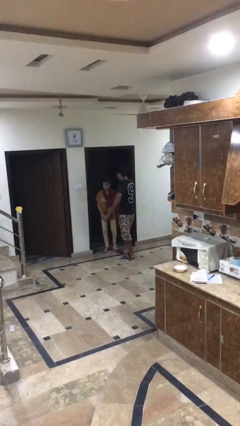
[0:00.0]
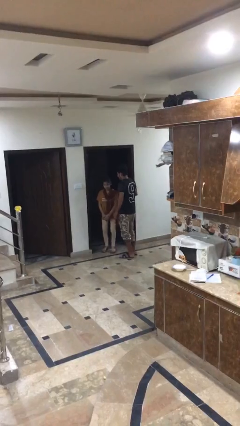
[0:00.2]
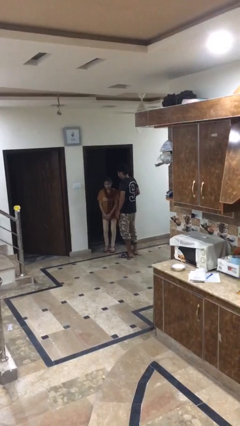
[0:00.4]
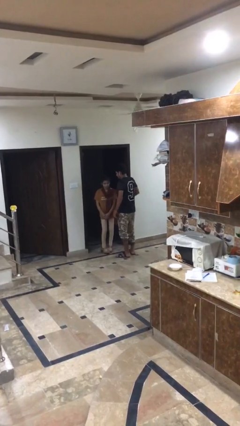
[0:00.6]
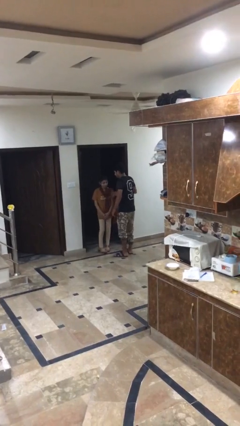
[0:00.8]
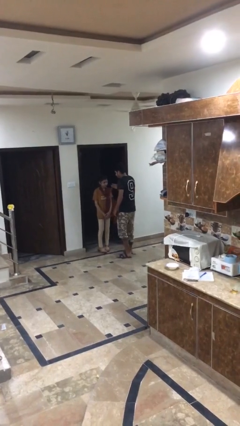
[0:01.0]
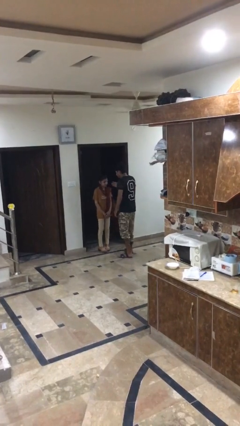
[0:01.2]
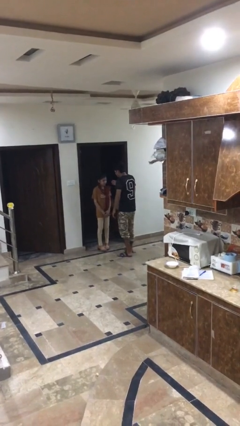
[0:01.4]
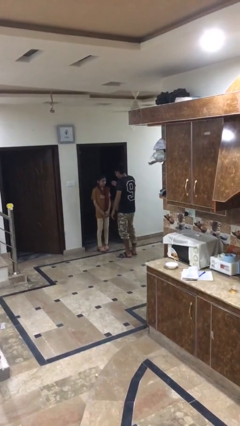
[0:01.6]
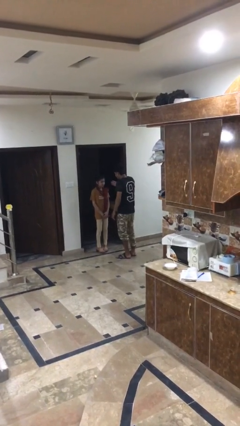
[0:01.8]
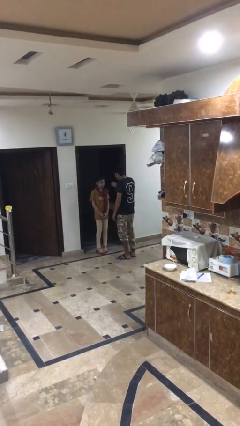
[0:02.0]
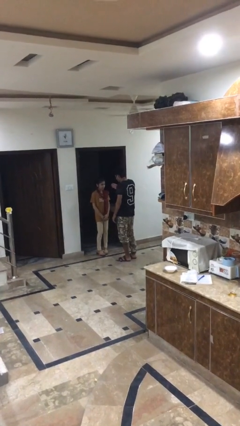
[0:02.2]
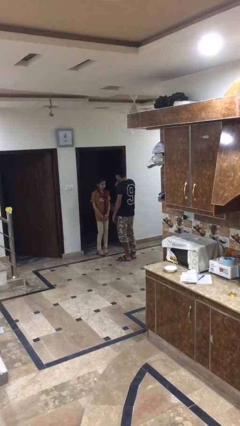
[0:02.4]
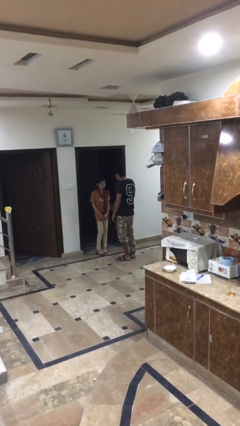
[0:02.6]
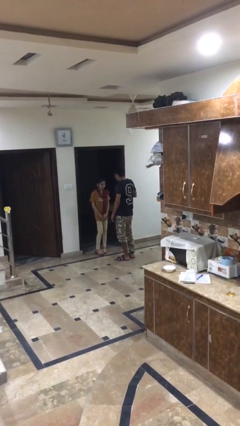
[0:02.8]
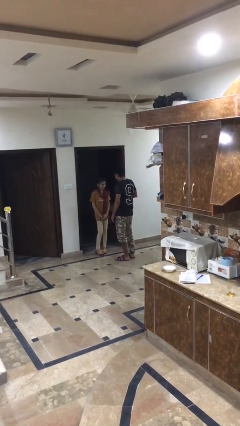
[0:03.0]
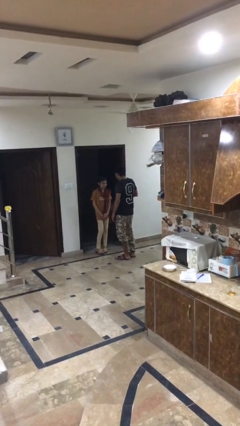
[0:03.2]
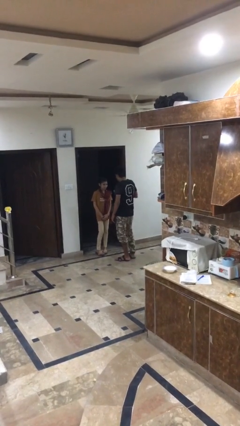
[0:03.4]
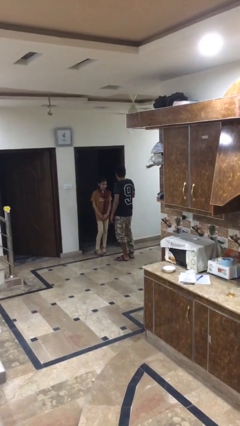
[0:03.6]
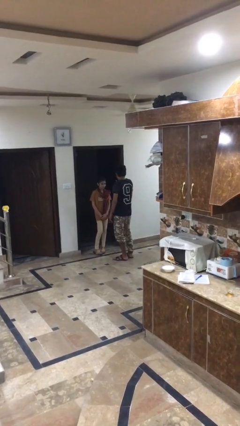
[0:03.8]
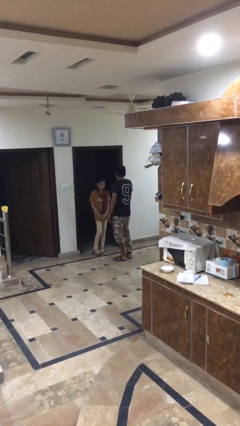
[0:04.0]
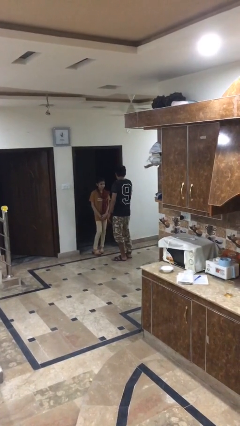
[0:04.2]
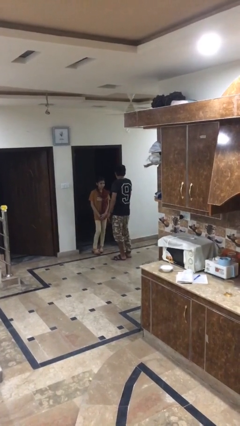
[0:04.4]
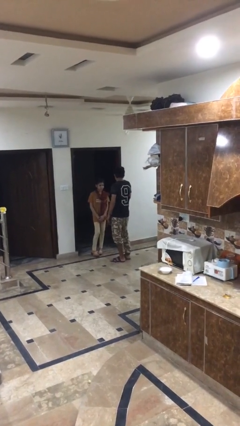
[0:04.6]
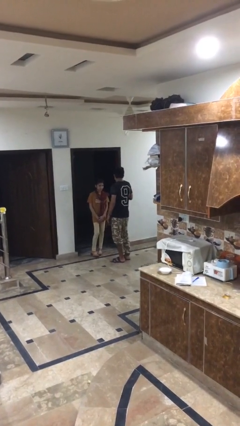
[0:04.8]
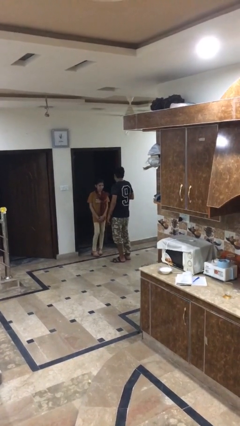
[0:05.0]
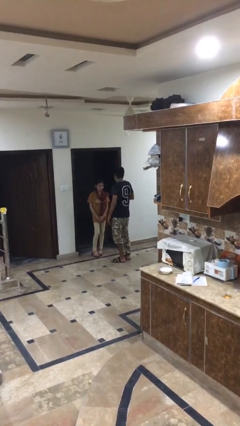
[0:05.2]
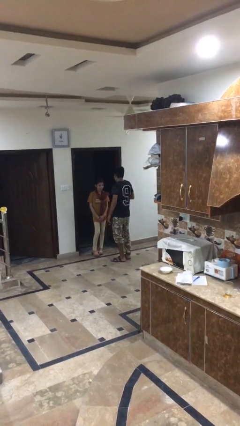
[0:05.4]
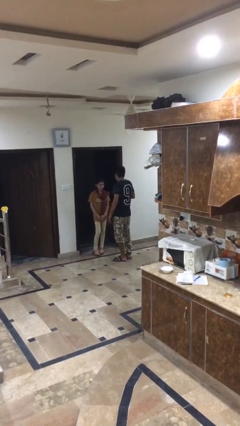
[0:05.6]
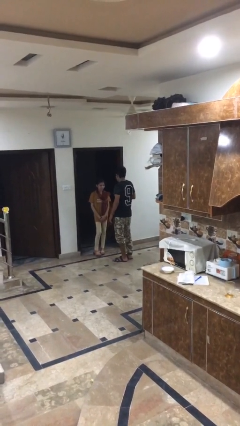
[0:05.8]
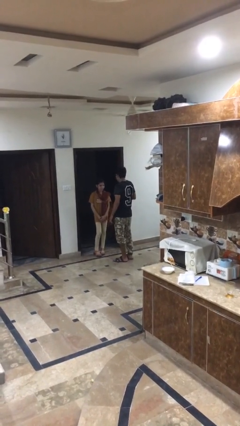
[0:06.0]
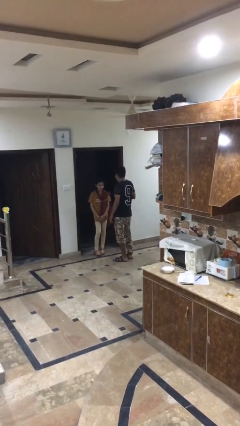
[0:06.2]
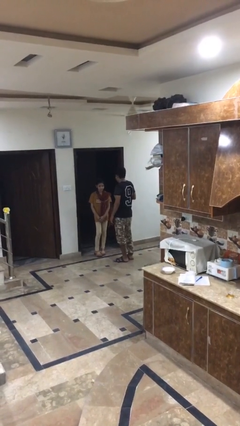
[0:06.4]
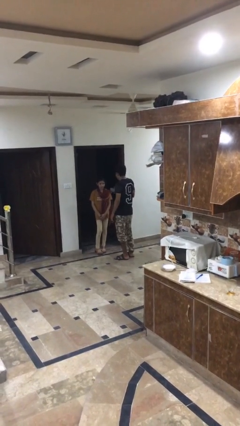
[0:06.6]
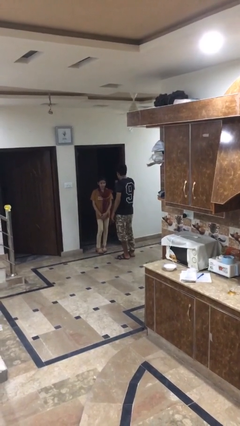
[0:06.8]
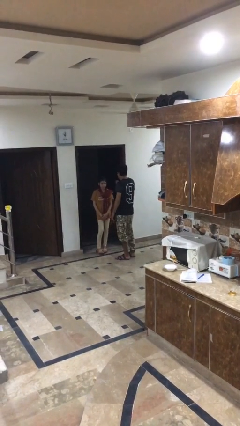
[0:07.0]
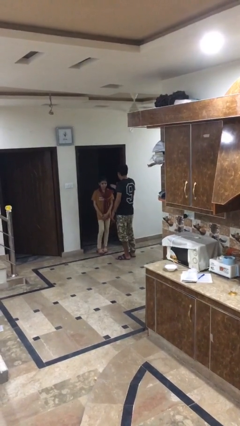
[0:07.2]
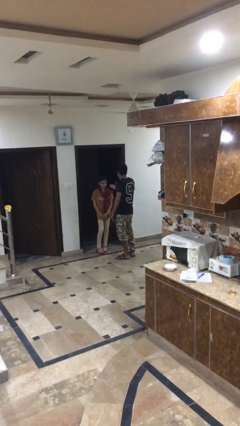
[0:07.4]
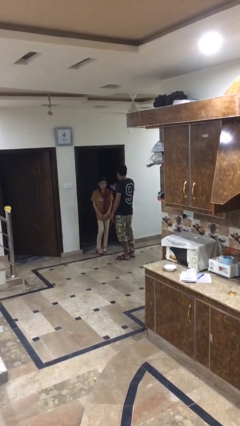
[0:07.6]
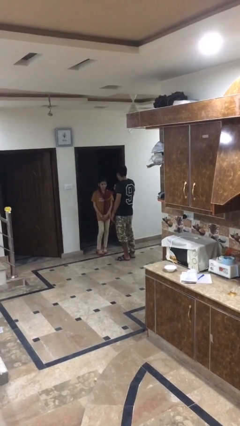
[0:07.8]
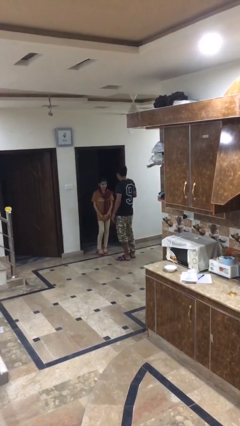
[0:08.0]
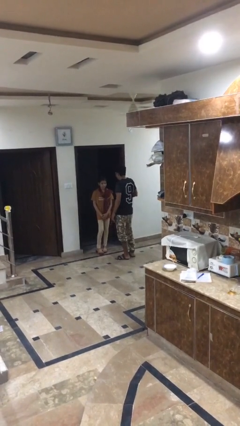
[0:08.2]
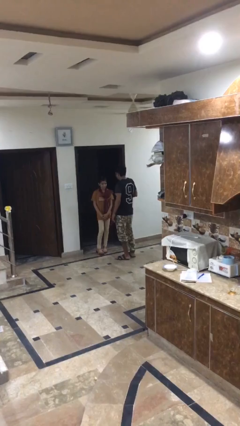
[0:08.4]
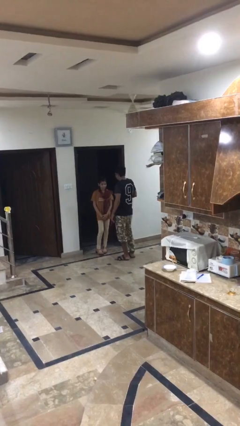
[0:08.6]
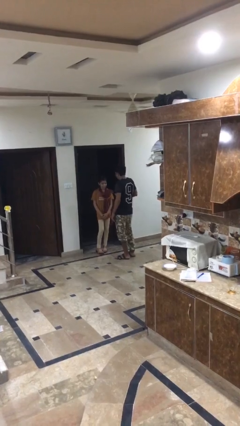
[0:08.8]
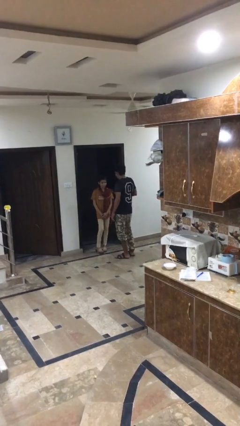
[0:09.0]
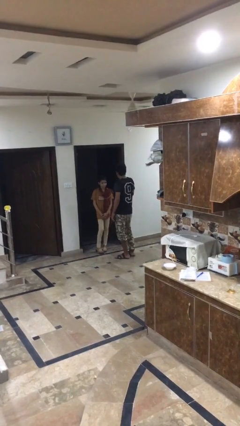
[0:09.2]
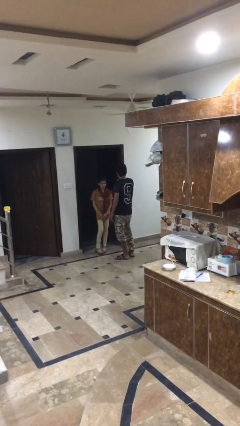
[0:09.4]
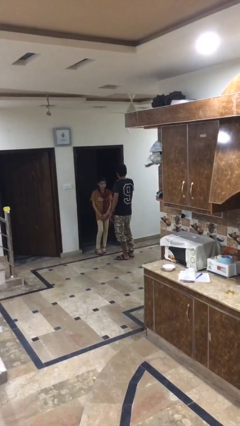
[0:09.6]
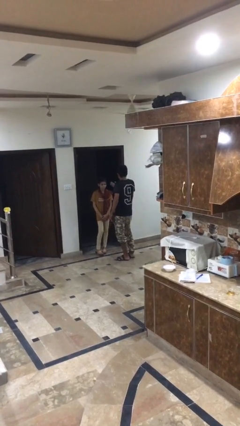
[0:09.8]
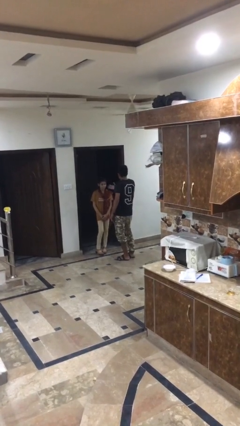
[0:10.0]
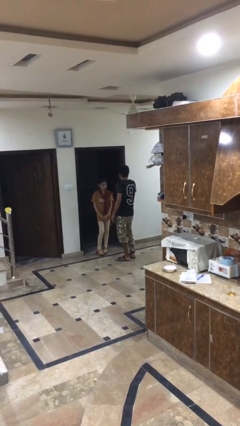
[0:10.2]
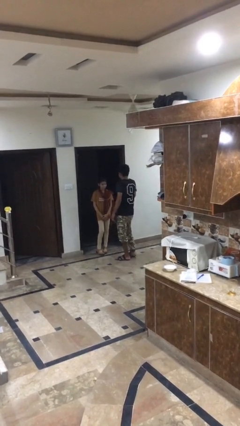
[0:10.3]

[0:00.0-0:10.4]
person talks to person

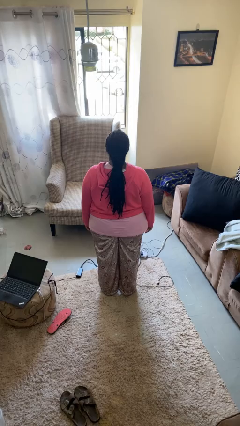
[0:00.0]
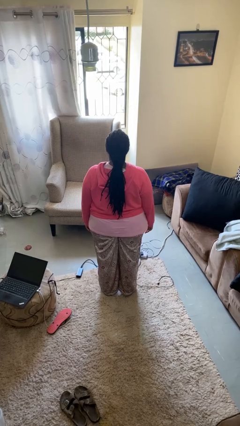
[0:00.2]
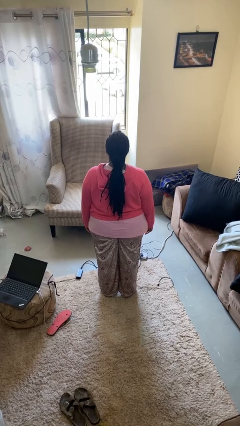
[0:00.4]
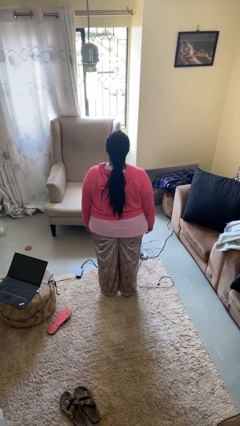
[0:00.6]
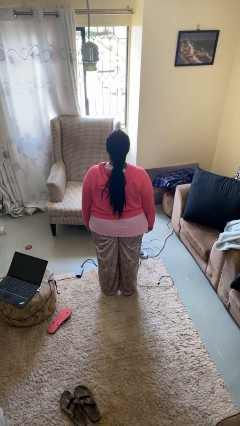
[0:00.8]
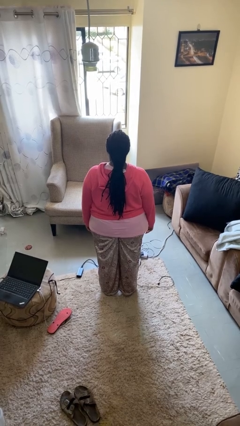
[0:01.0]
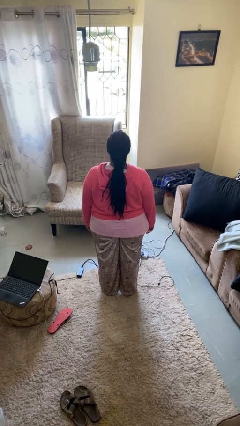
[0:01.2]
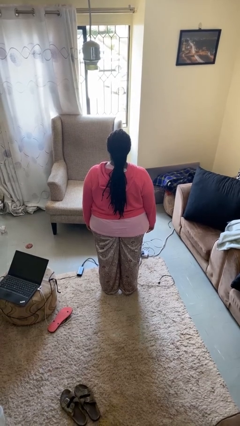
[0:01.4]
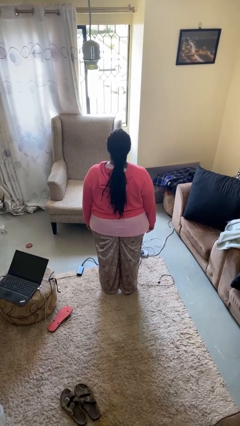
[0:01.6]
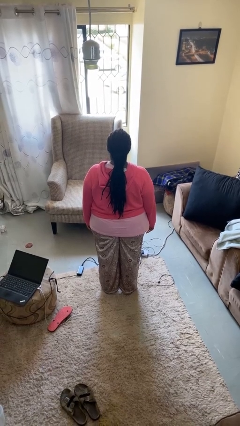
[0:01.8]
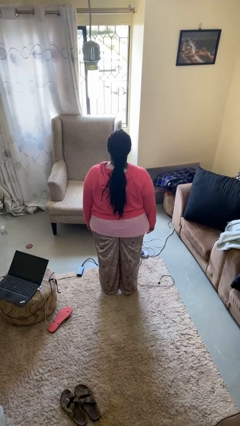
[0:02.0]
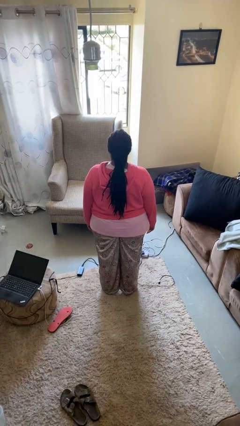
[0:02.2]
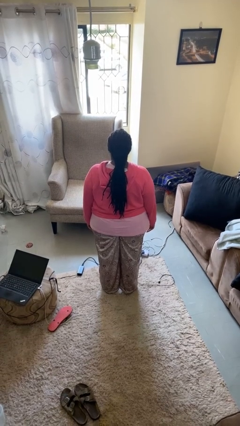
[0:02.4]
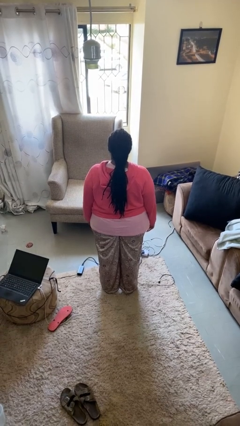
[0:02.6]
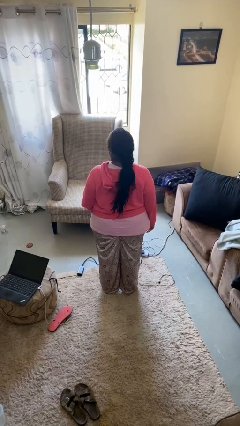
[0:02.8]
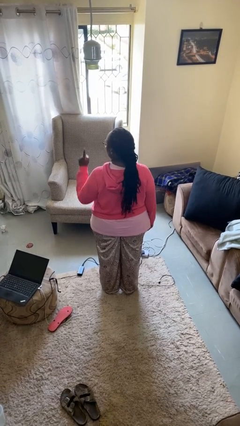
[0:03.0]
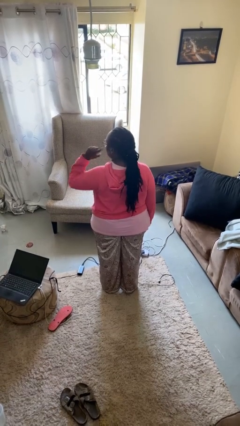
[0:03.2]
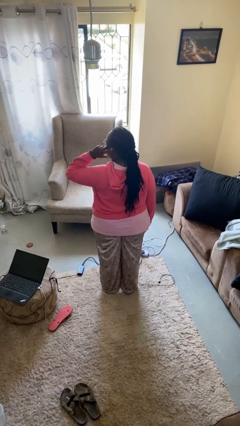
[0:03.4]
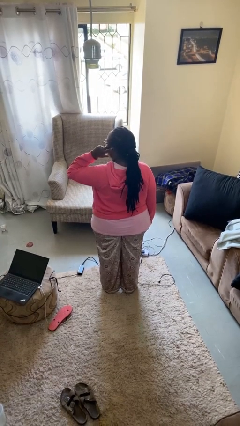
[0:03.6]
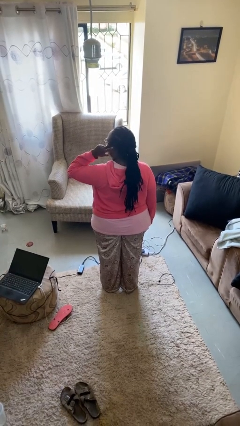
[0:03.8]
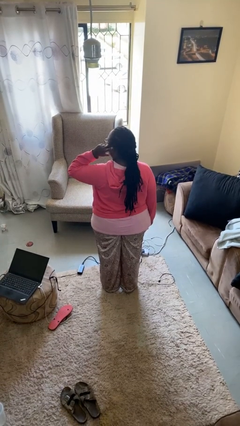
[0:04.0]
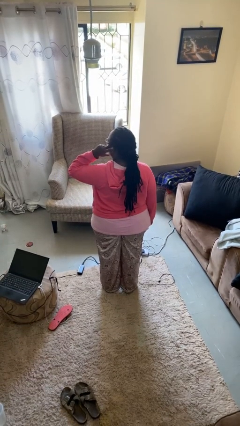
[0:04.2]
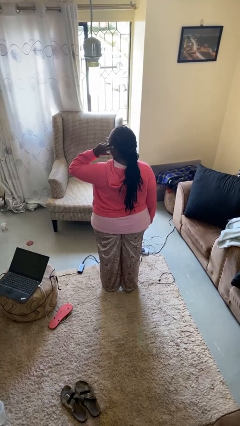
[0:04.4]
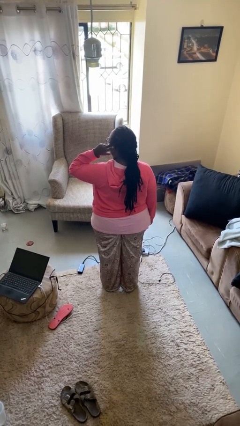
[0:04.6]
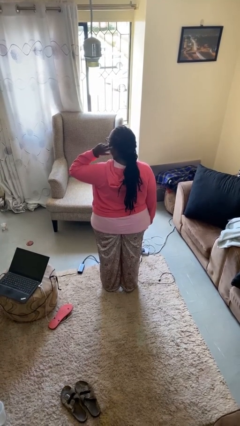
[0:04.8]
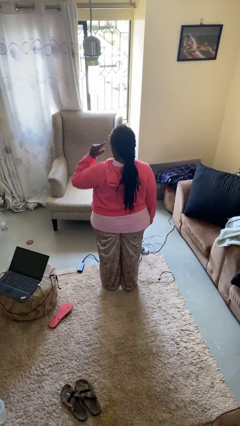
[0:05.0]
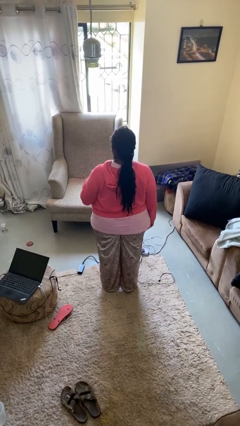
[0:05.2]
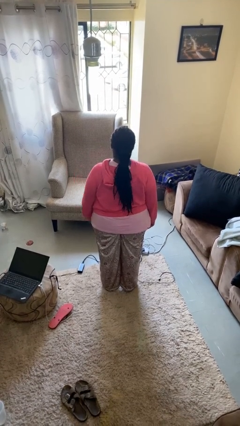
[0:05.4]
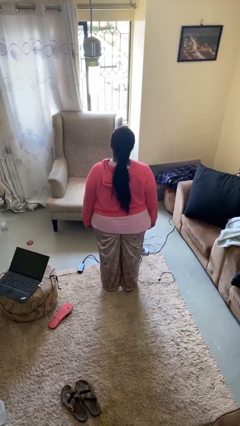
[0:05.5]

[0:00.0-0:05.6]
person gestures listen closely

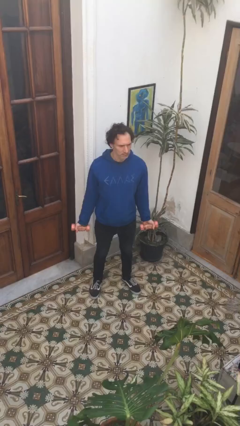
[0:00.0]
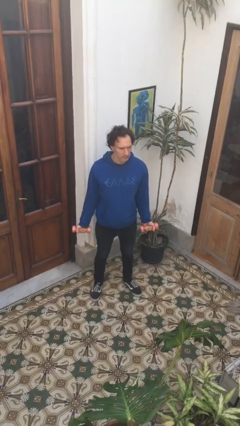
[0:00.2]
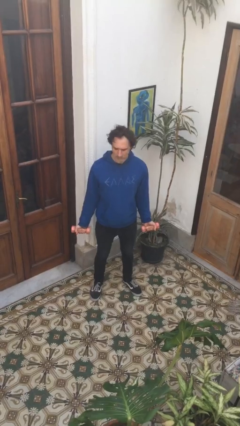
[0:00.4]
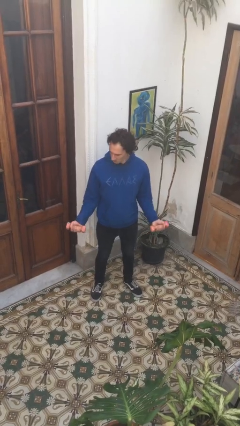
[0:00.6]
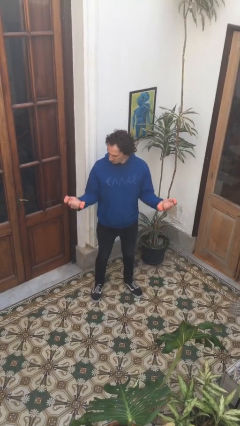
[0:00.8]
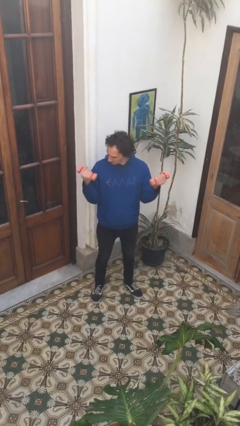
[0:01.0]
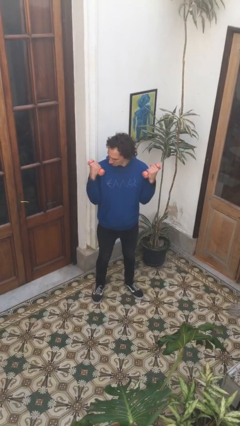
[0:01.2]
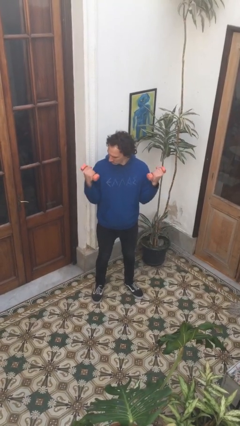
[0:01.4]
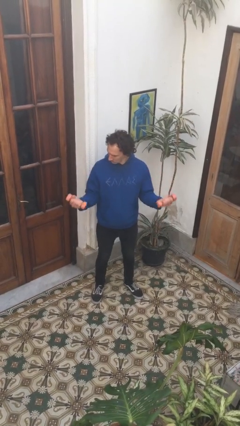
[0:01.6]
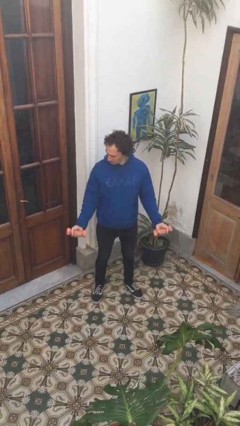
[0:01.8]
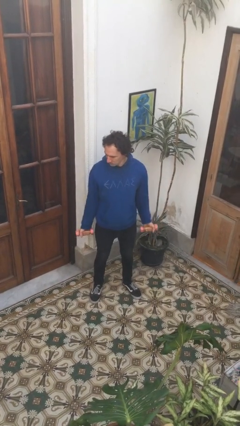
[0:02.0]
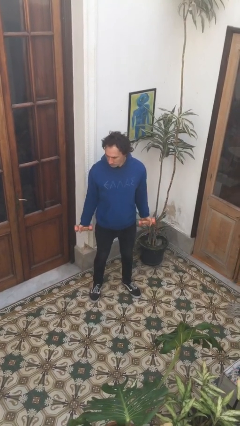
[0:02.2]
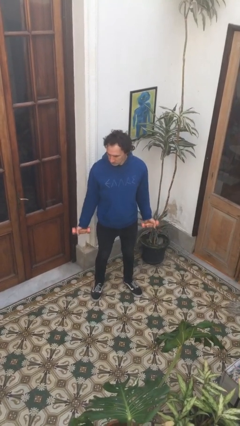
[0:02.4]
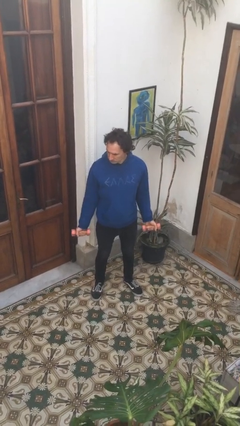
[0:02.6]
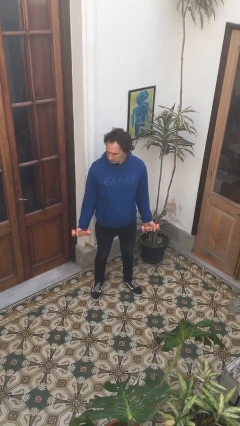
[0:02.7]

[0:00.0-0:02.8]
person lifts dumbbells
